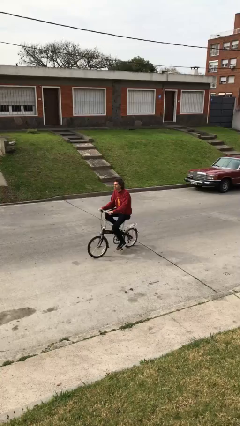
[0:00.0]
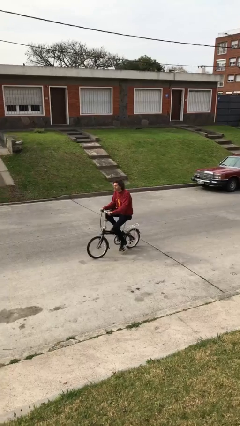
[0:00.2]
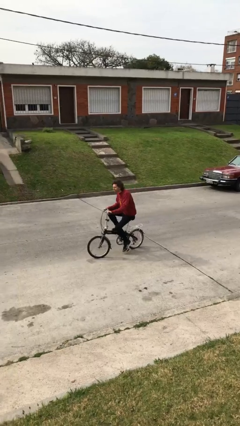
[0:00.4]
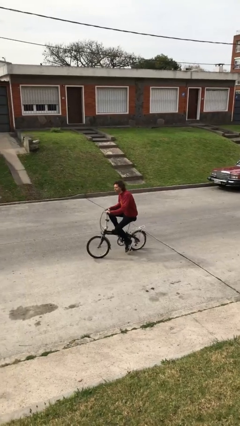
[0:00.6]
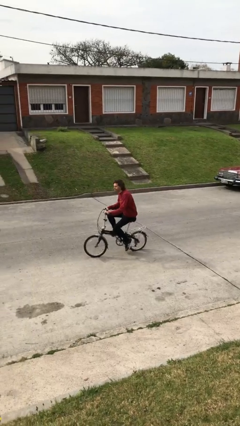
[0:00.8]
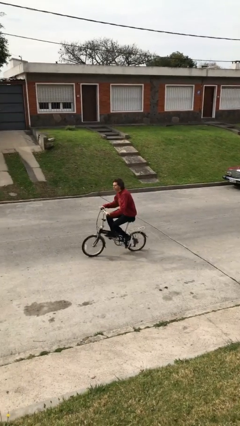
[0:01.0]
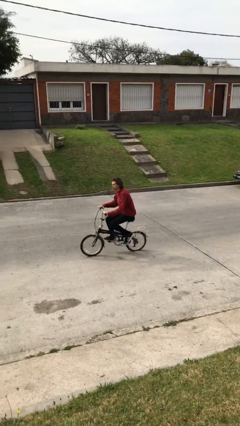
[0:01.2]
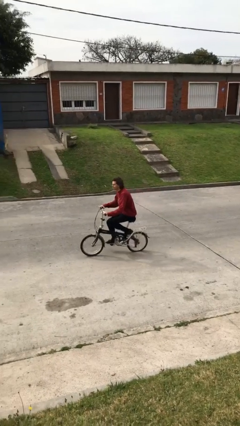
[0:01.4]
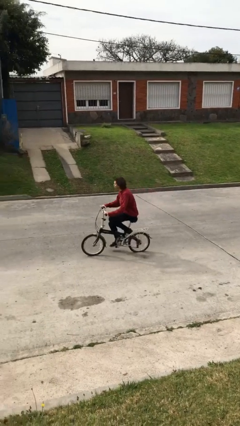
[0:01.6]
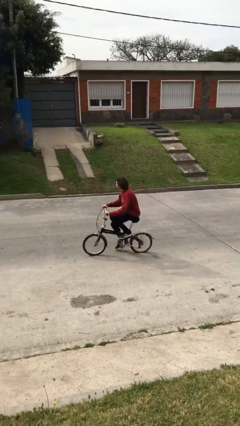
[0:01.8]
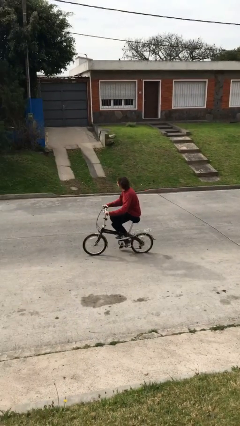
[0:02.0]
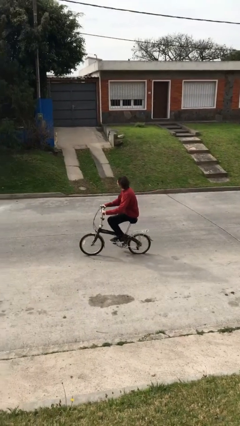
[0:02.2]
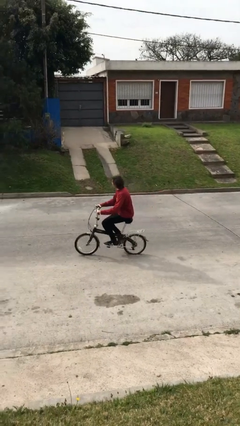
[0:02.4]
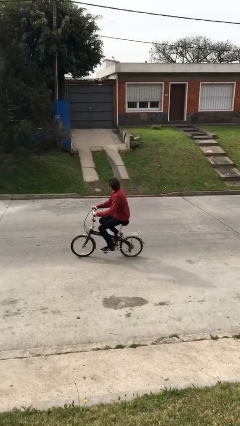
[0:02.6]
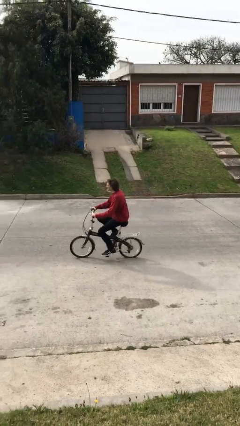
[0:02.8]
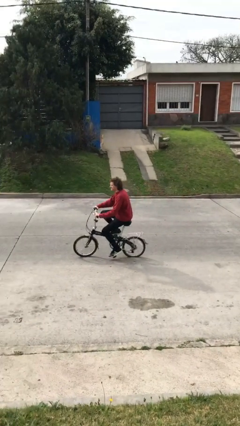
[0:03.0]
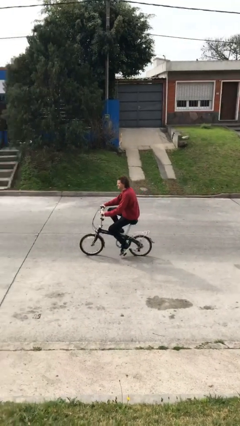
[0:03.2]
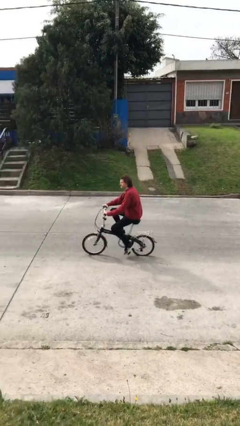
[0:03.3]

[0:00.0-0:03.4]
person rides bicycle

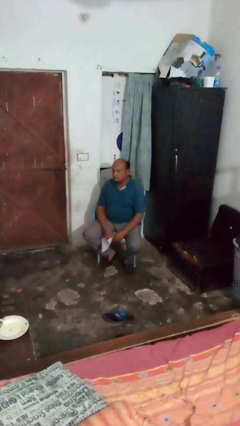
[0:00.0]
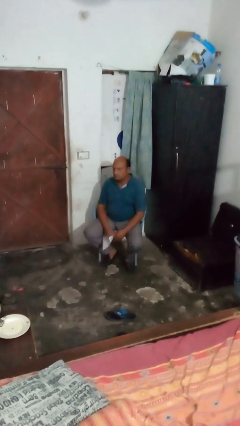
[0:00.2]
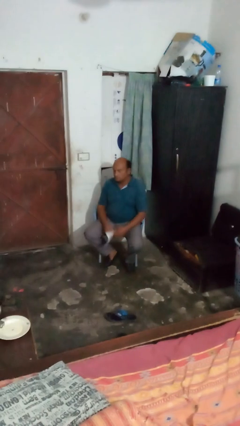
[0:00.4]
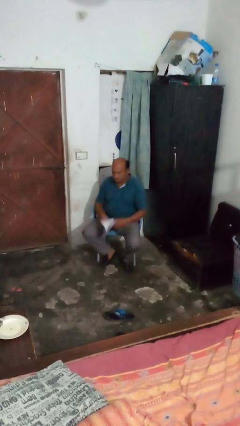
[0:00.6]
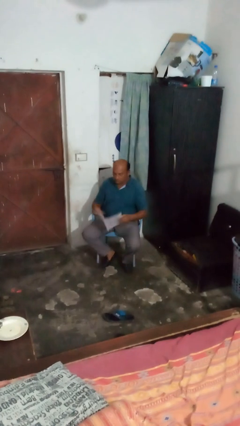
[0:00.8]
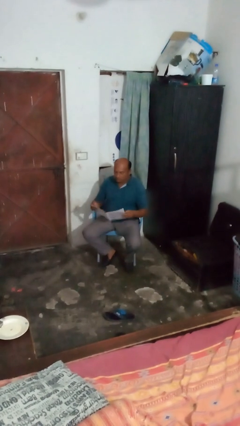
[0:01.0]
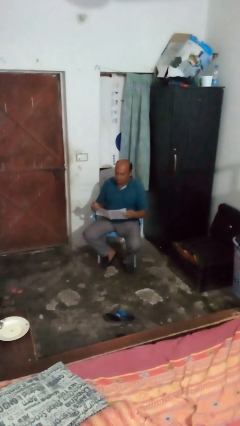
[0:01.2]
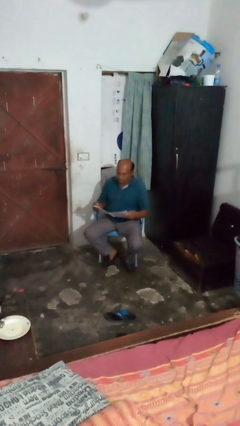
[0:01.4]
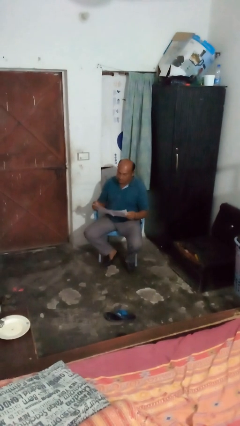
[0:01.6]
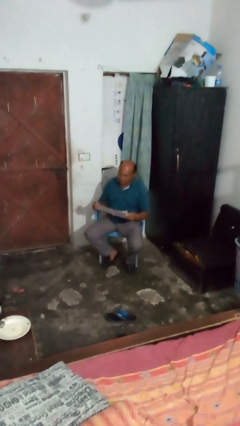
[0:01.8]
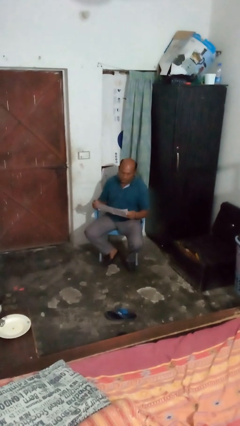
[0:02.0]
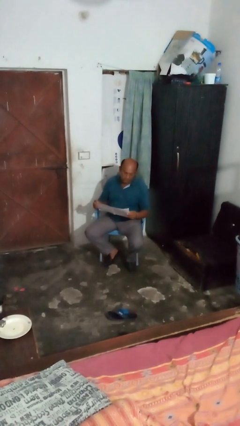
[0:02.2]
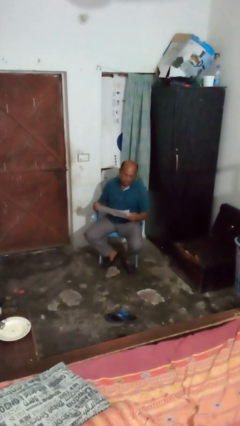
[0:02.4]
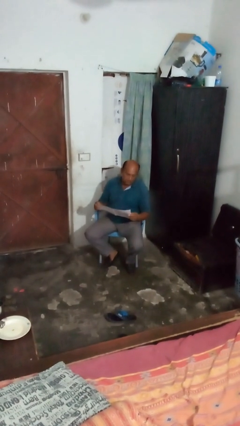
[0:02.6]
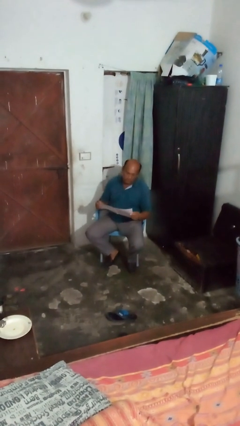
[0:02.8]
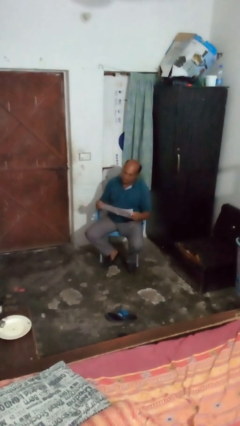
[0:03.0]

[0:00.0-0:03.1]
person reads newspaper

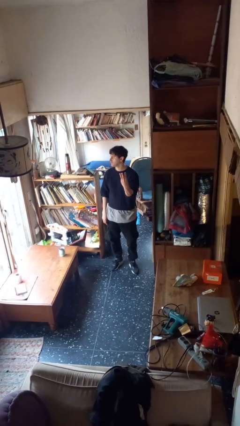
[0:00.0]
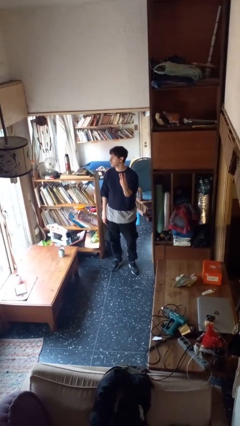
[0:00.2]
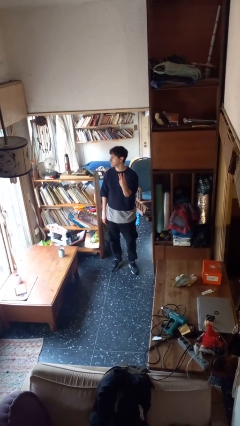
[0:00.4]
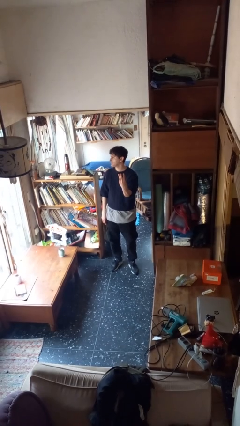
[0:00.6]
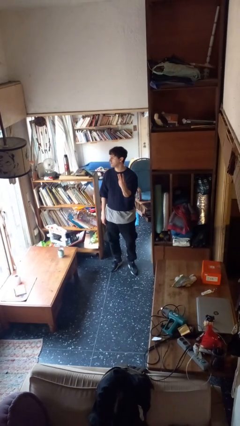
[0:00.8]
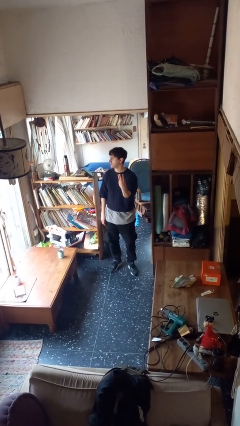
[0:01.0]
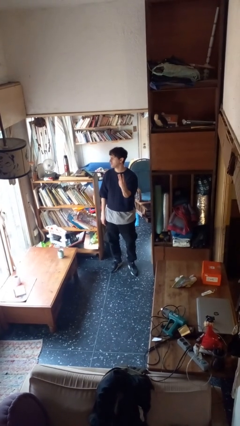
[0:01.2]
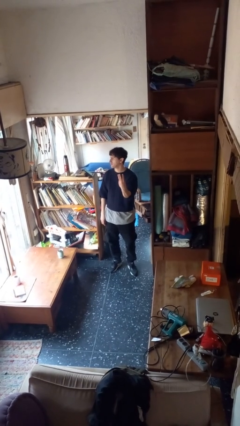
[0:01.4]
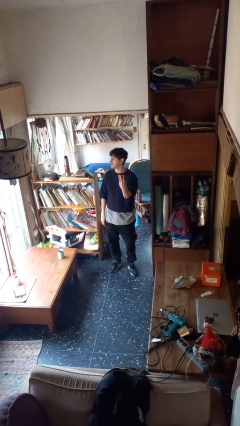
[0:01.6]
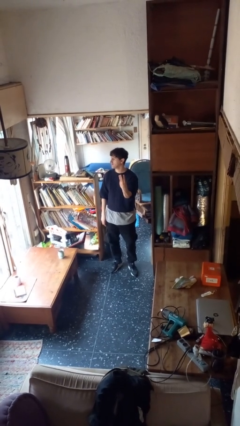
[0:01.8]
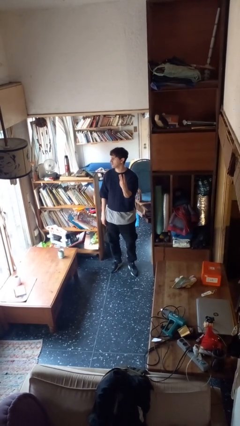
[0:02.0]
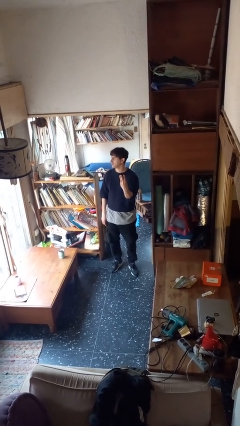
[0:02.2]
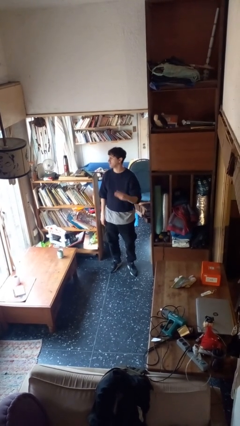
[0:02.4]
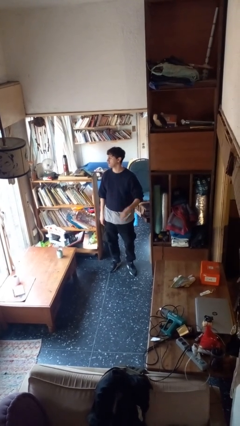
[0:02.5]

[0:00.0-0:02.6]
person gestures number three

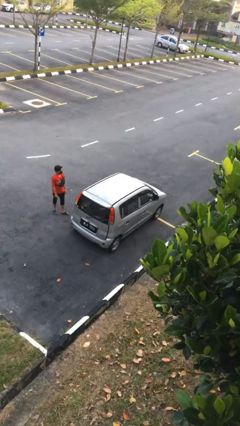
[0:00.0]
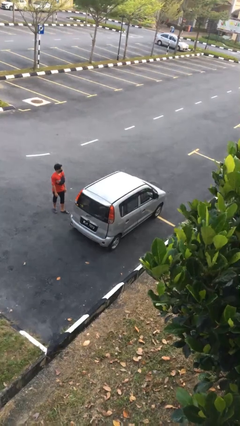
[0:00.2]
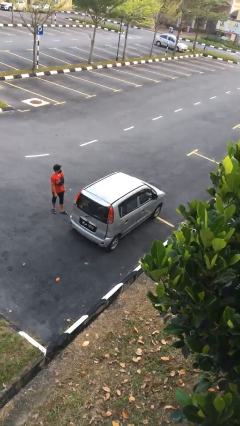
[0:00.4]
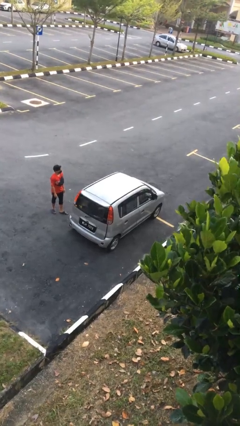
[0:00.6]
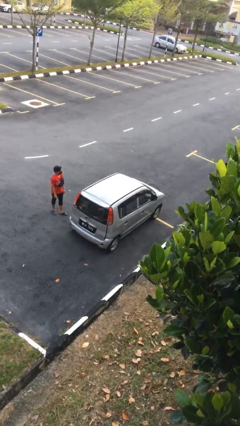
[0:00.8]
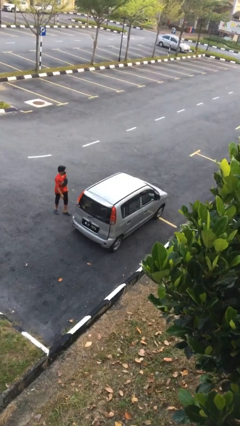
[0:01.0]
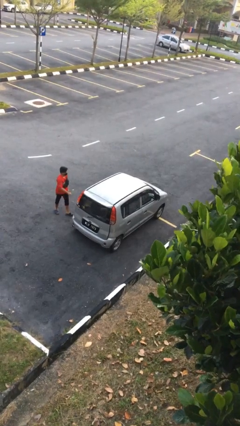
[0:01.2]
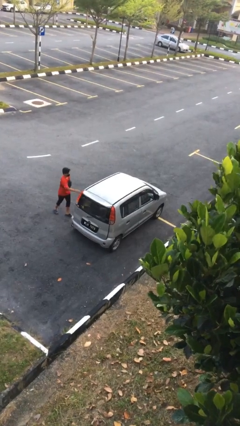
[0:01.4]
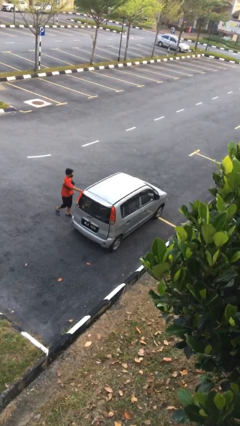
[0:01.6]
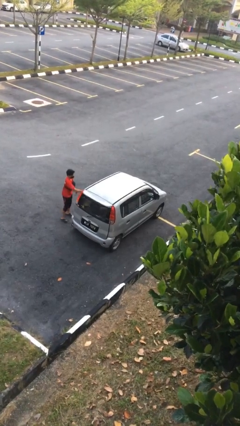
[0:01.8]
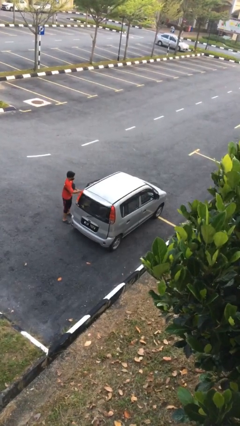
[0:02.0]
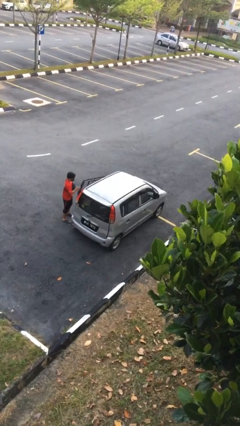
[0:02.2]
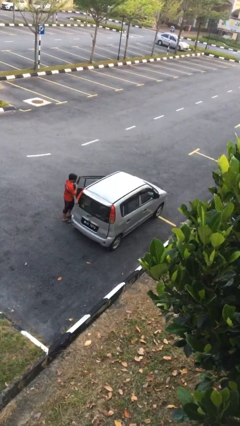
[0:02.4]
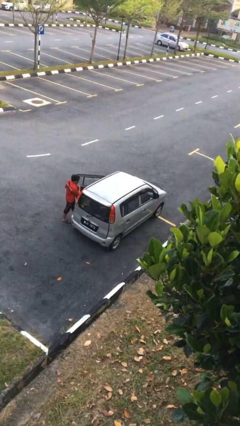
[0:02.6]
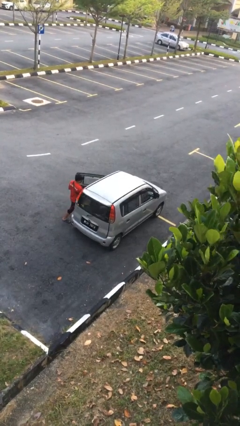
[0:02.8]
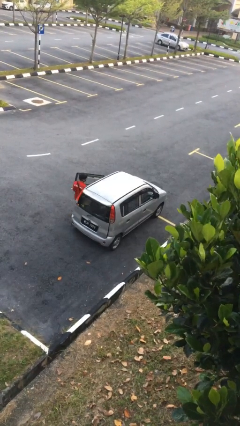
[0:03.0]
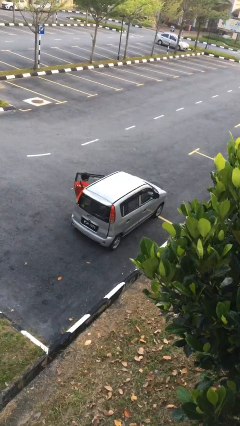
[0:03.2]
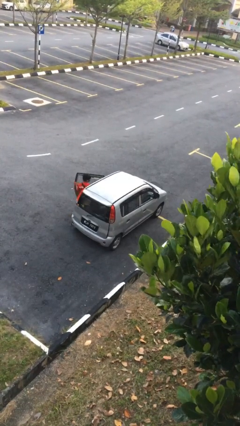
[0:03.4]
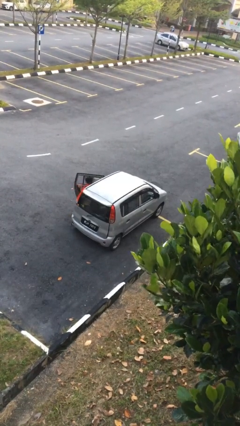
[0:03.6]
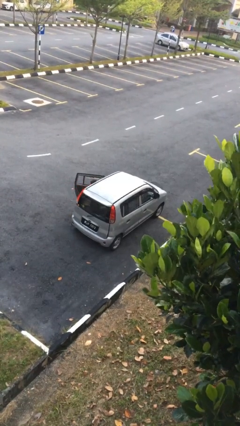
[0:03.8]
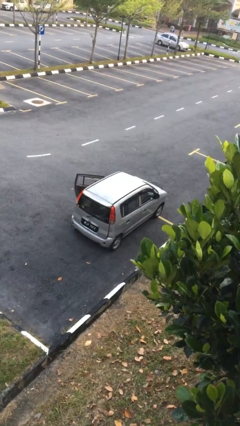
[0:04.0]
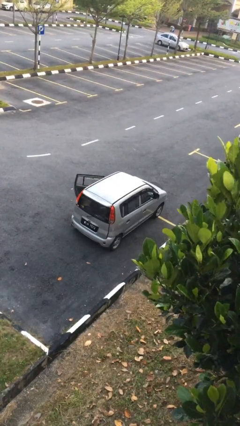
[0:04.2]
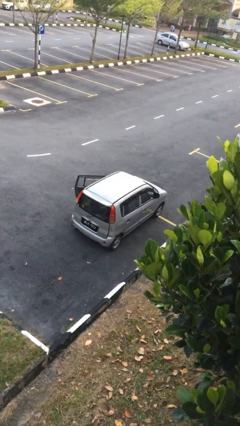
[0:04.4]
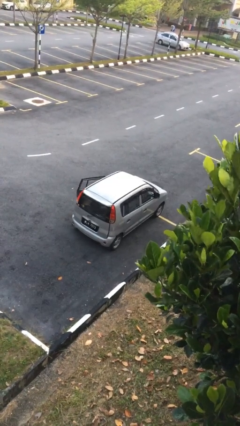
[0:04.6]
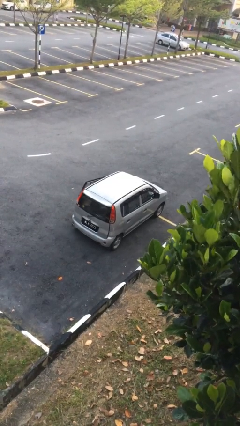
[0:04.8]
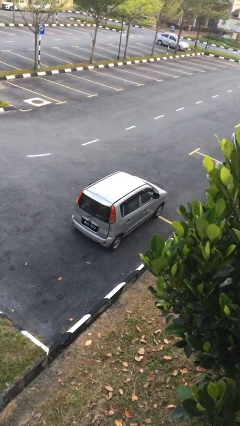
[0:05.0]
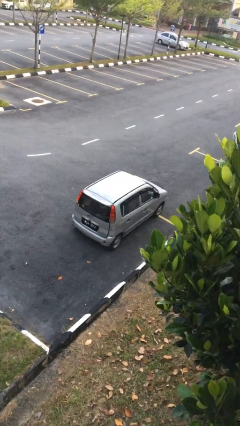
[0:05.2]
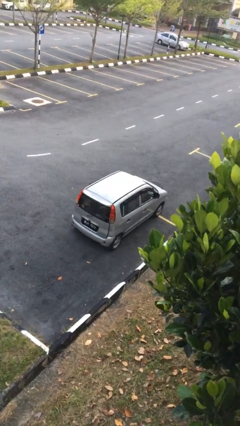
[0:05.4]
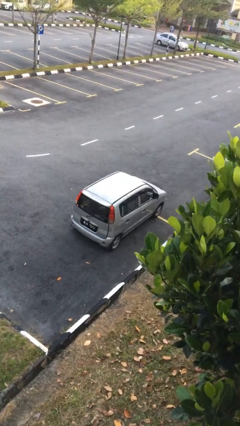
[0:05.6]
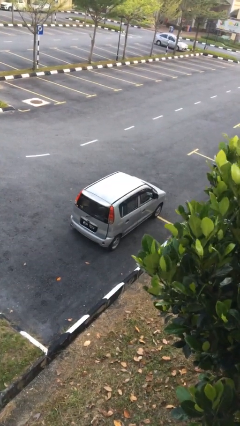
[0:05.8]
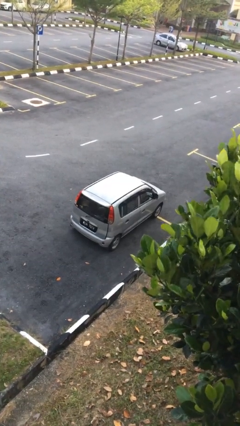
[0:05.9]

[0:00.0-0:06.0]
car picks up person

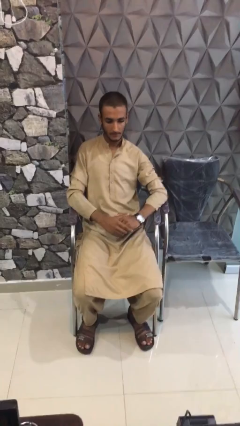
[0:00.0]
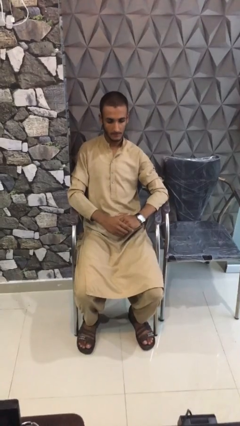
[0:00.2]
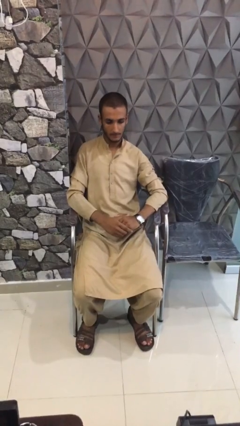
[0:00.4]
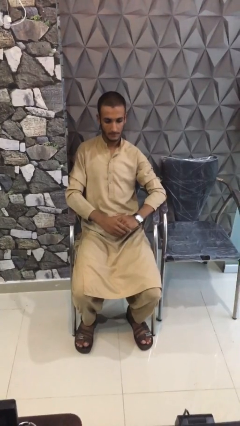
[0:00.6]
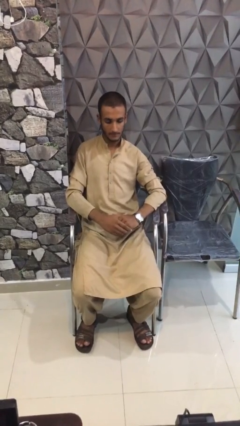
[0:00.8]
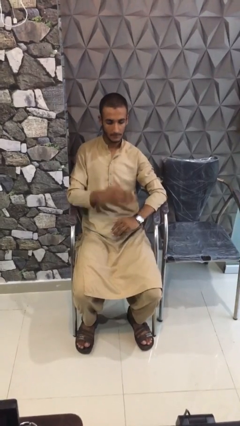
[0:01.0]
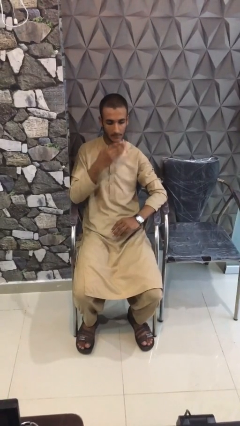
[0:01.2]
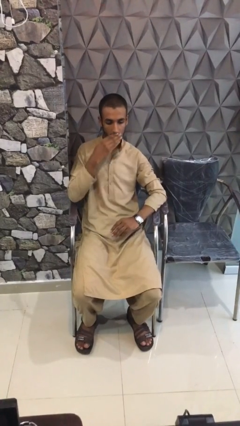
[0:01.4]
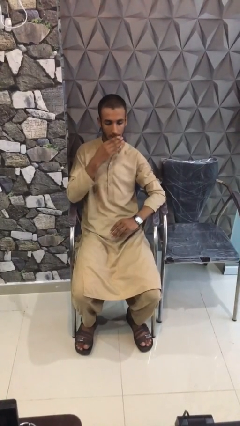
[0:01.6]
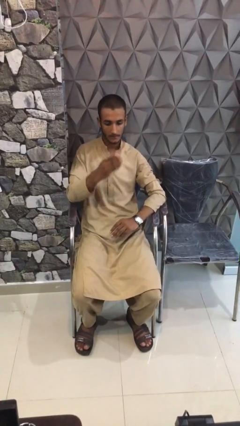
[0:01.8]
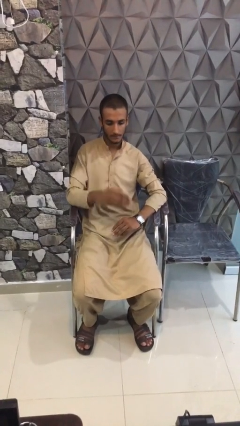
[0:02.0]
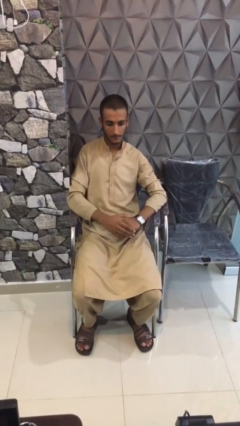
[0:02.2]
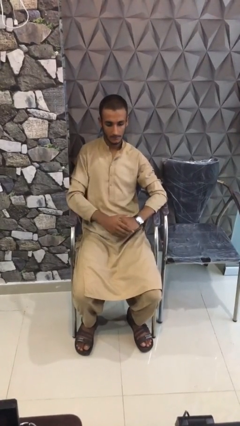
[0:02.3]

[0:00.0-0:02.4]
person gestures blow kiss

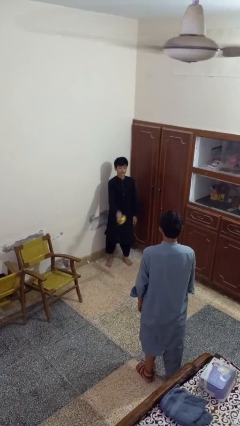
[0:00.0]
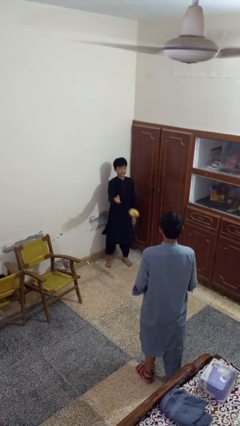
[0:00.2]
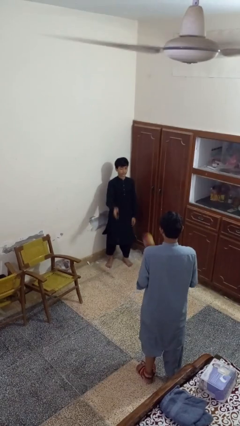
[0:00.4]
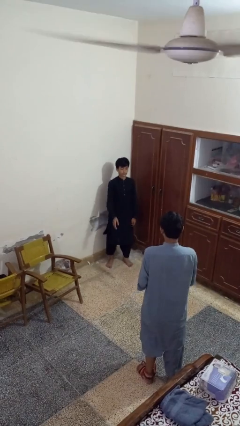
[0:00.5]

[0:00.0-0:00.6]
person throws object to person
